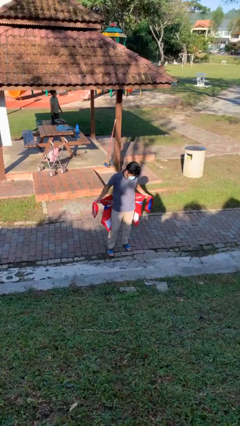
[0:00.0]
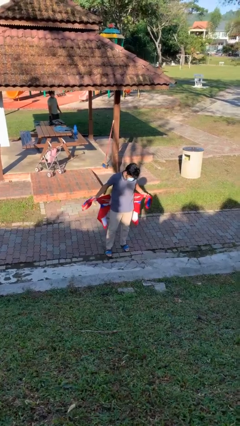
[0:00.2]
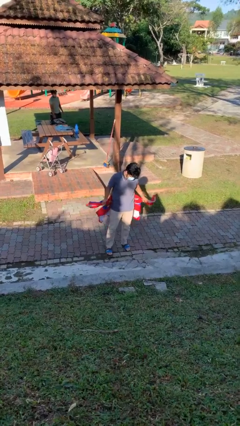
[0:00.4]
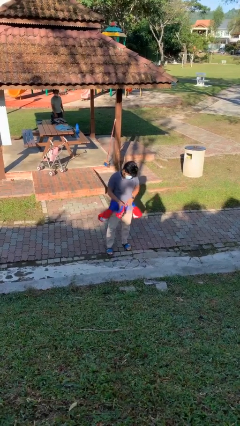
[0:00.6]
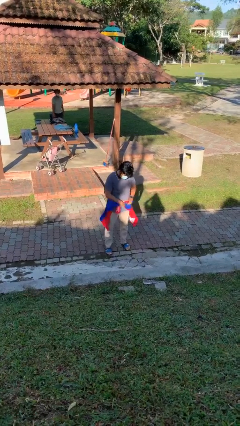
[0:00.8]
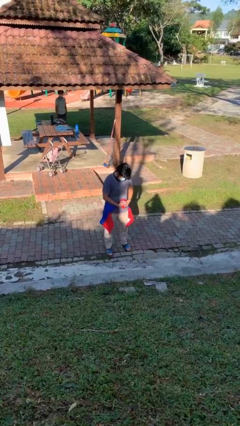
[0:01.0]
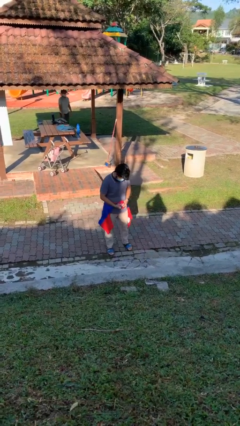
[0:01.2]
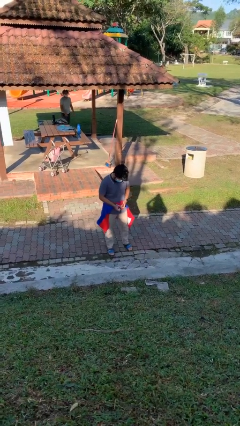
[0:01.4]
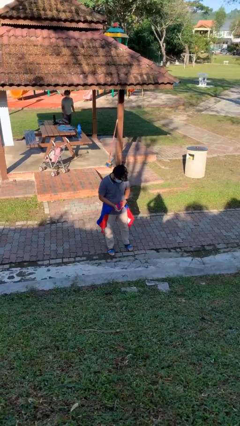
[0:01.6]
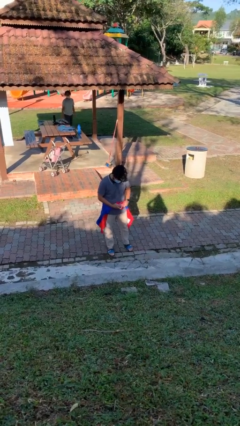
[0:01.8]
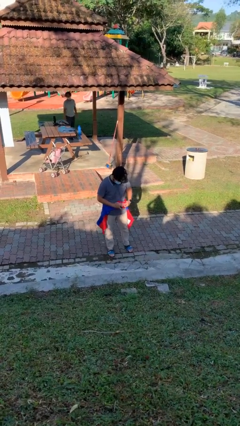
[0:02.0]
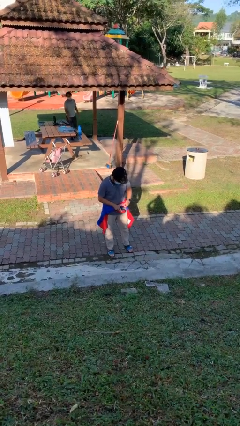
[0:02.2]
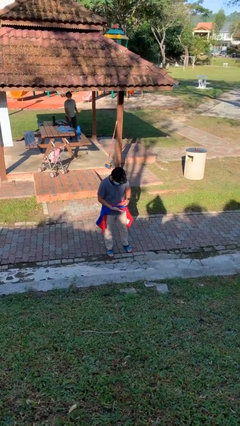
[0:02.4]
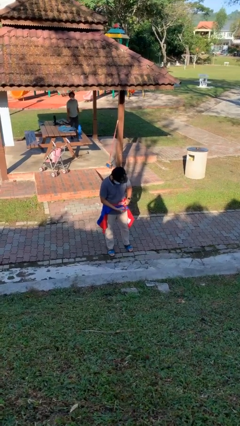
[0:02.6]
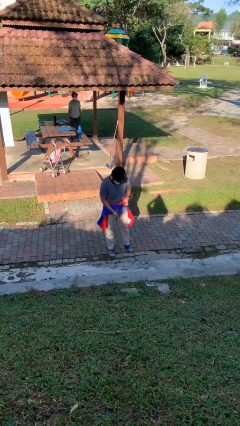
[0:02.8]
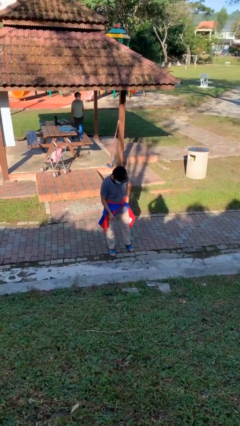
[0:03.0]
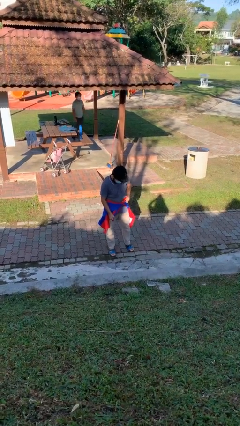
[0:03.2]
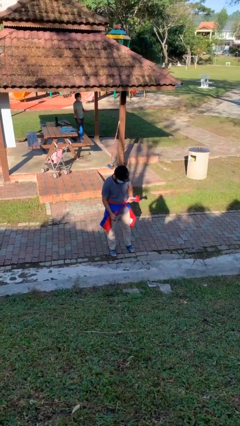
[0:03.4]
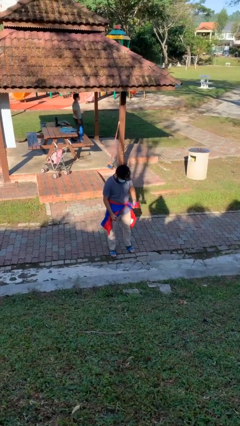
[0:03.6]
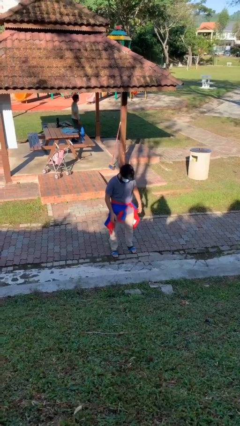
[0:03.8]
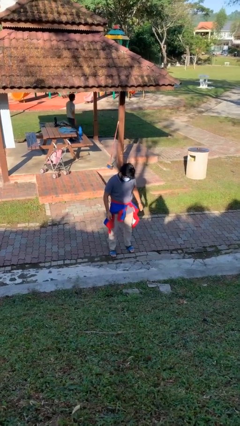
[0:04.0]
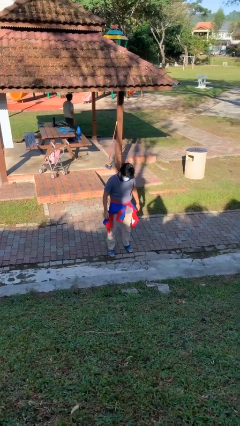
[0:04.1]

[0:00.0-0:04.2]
person ties jacket around waist

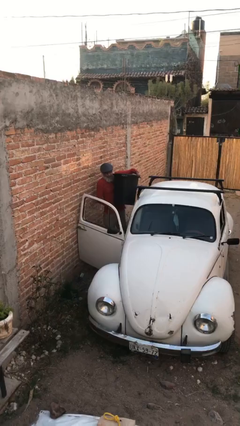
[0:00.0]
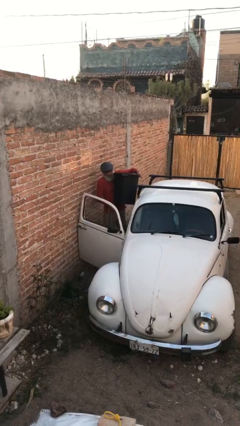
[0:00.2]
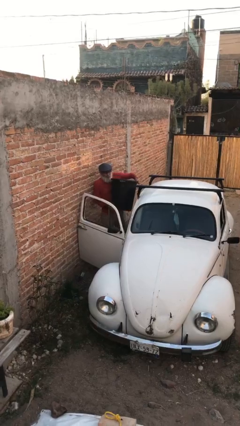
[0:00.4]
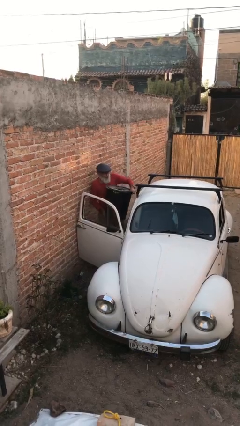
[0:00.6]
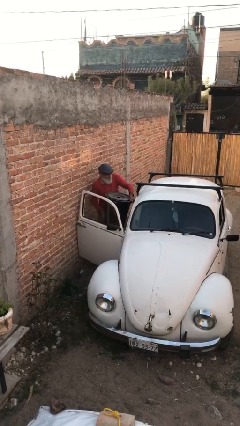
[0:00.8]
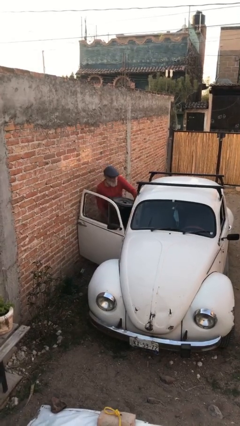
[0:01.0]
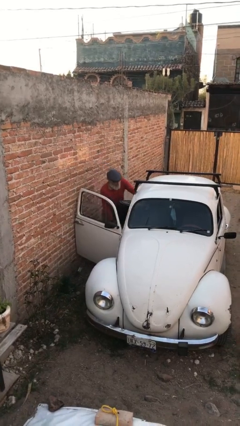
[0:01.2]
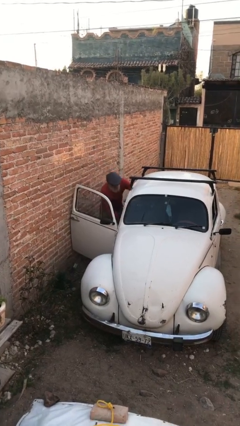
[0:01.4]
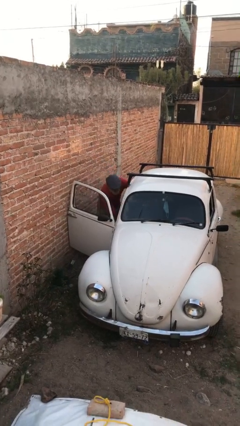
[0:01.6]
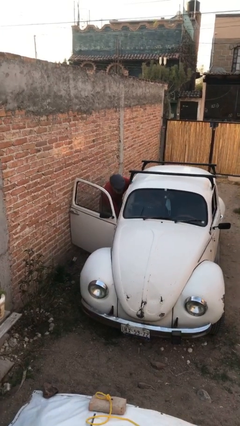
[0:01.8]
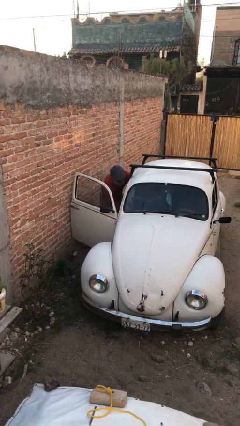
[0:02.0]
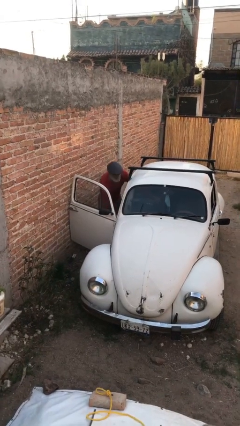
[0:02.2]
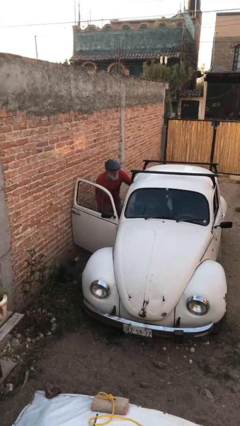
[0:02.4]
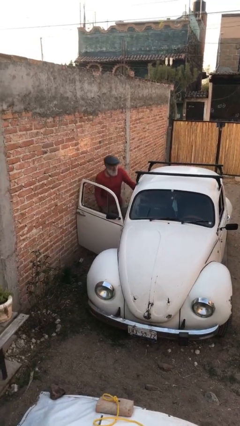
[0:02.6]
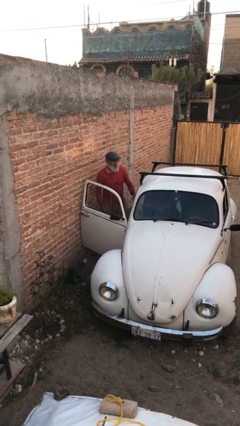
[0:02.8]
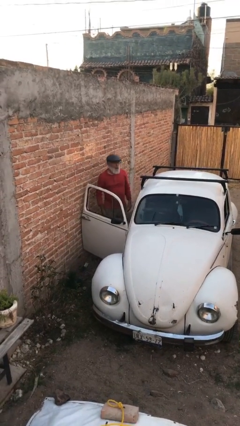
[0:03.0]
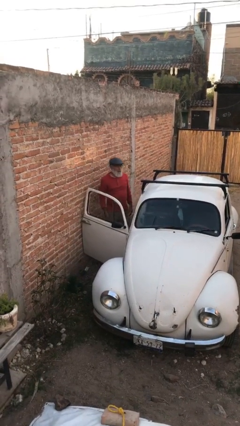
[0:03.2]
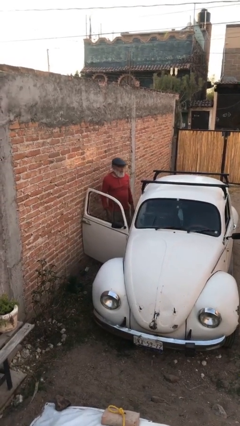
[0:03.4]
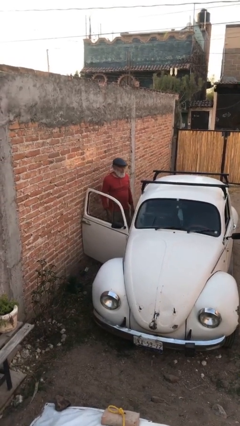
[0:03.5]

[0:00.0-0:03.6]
person loads car

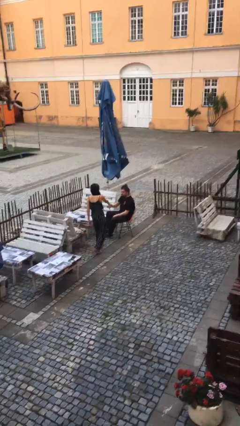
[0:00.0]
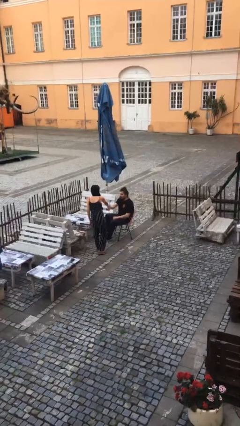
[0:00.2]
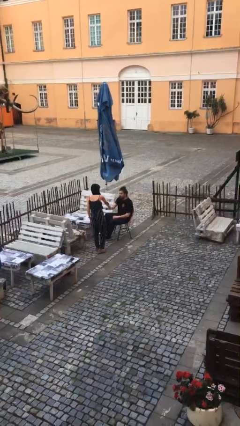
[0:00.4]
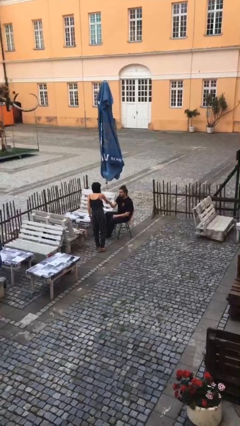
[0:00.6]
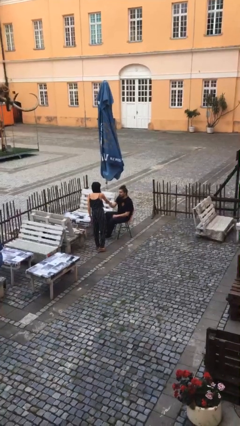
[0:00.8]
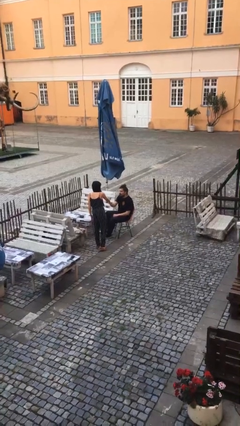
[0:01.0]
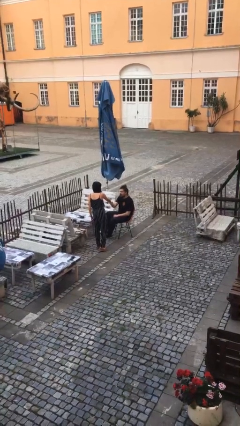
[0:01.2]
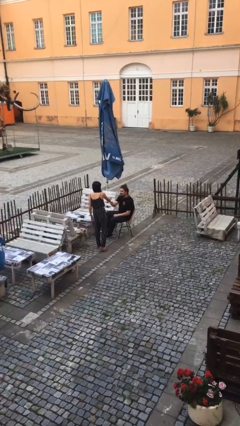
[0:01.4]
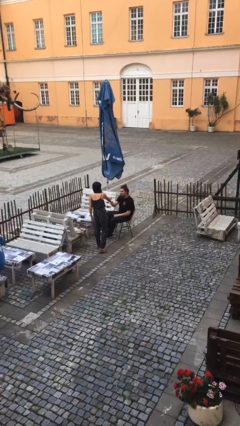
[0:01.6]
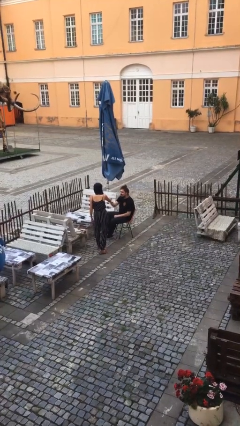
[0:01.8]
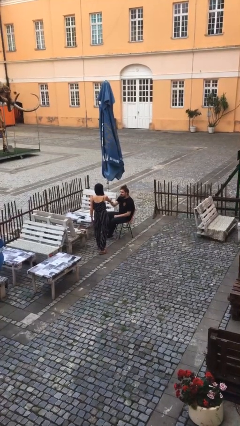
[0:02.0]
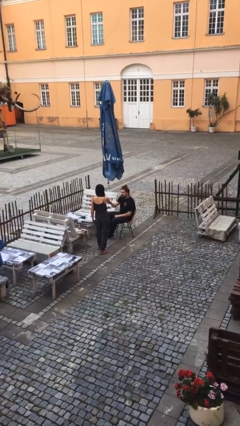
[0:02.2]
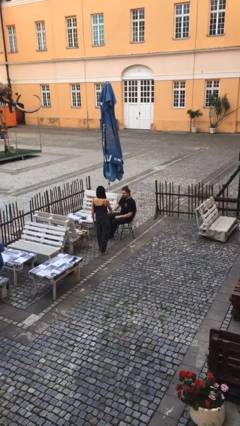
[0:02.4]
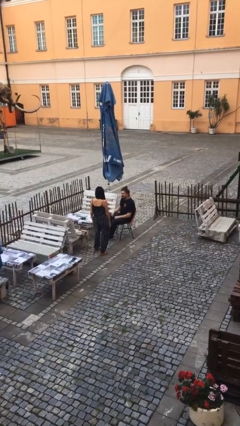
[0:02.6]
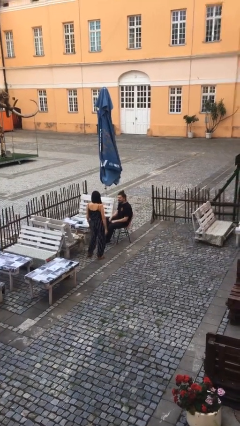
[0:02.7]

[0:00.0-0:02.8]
person shakes hand

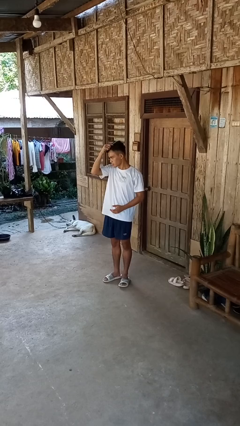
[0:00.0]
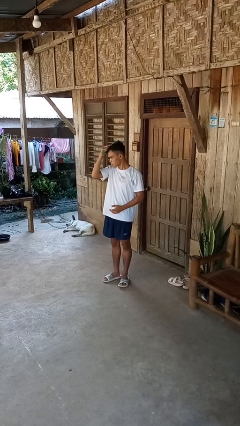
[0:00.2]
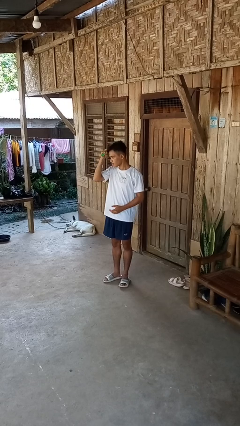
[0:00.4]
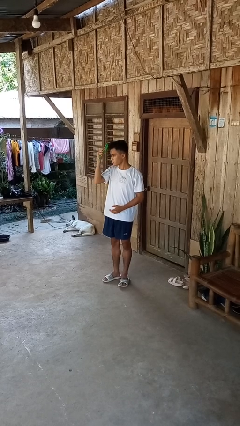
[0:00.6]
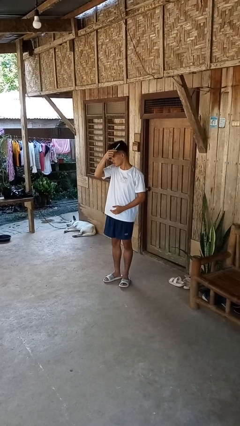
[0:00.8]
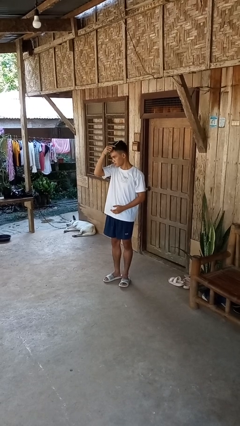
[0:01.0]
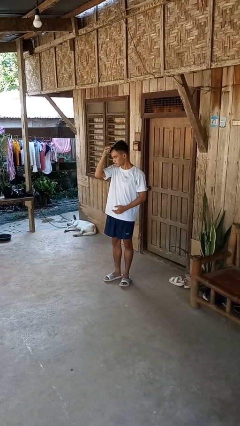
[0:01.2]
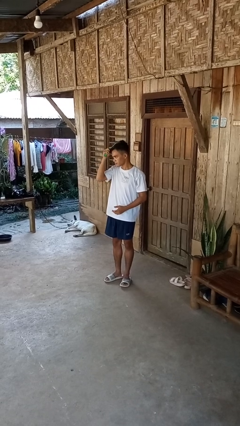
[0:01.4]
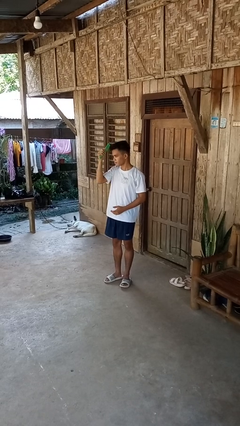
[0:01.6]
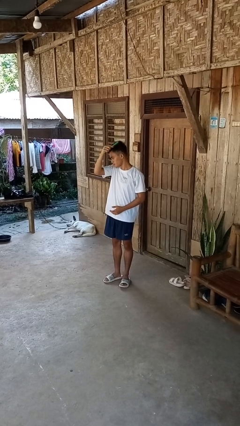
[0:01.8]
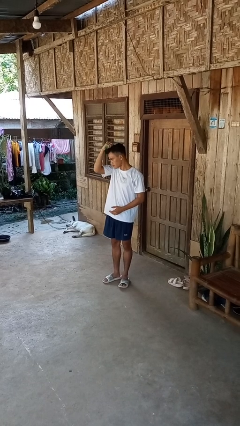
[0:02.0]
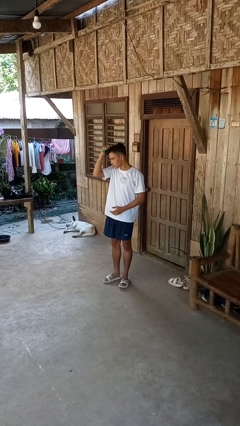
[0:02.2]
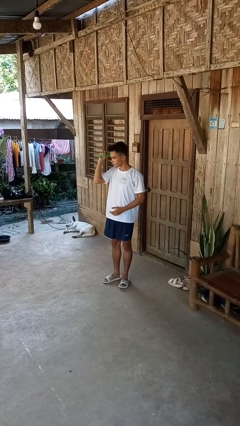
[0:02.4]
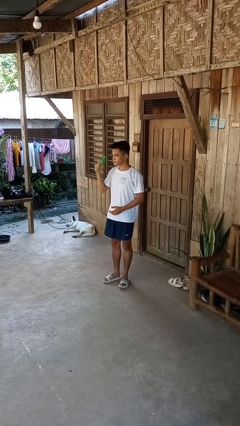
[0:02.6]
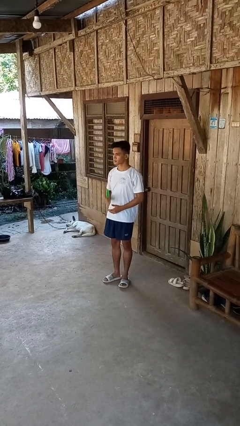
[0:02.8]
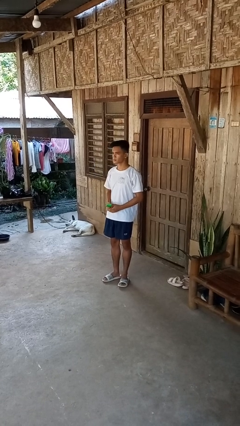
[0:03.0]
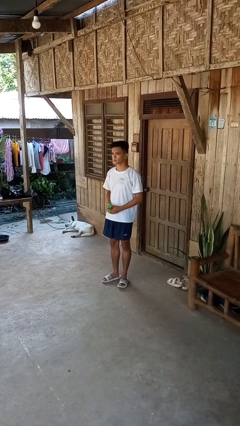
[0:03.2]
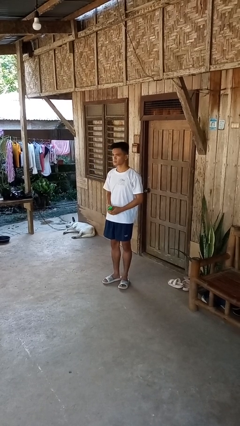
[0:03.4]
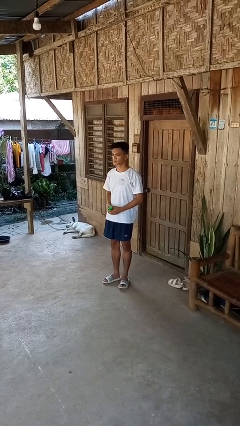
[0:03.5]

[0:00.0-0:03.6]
person brushes hair

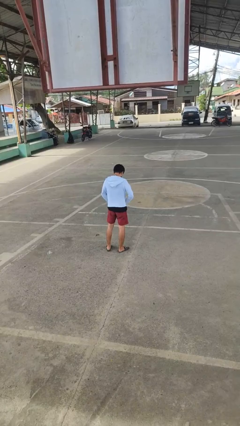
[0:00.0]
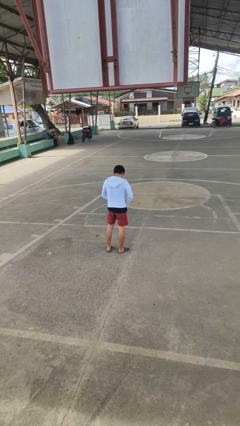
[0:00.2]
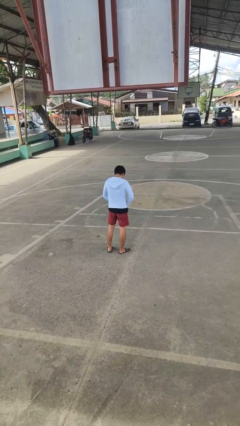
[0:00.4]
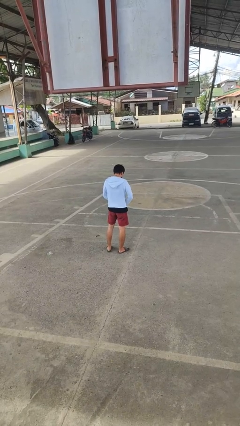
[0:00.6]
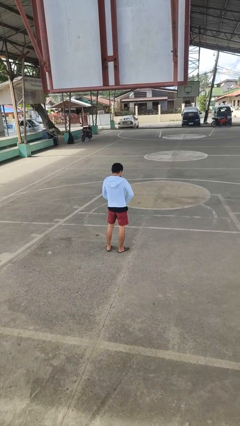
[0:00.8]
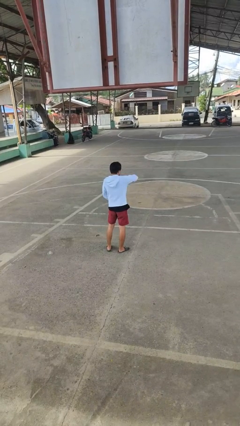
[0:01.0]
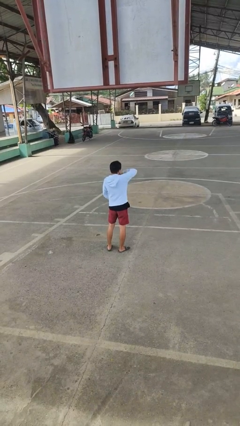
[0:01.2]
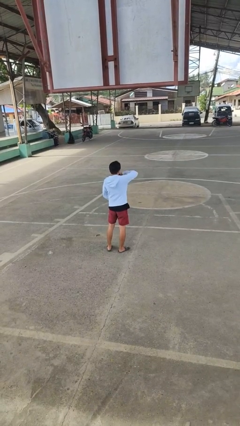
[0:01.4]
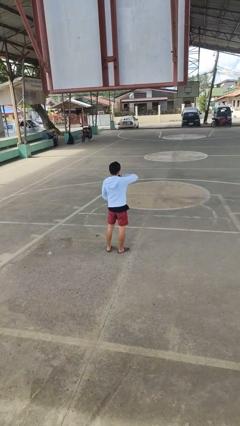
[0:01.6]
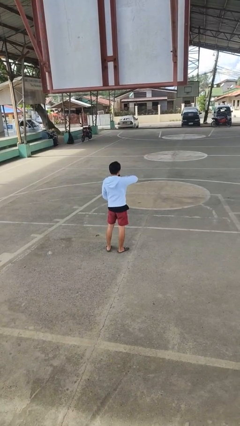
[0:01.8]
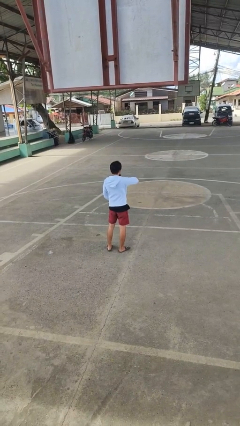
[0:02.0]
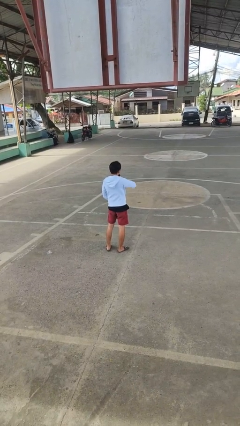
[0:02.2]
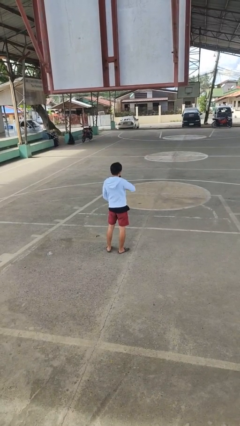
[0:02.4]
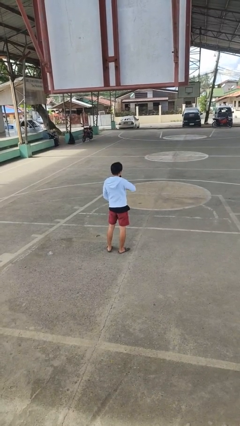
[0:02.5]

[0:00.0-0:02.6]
person zips up jacket

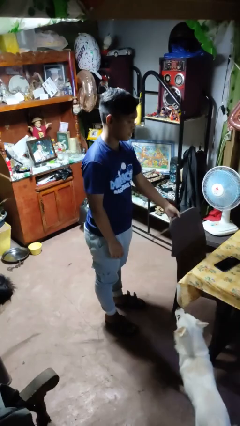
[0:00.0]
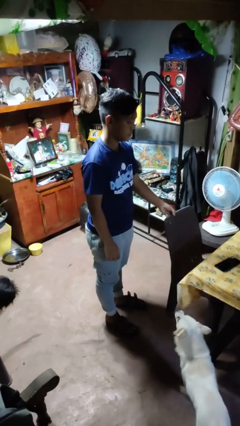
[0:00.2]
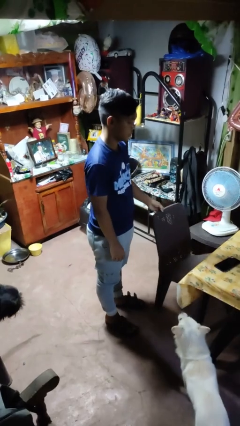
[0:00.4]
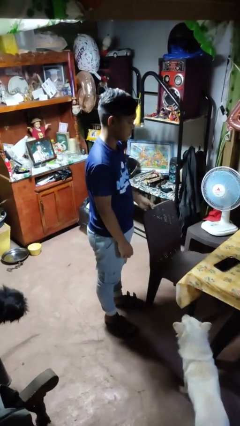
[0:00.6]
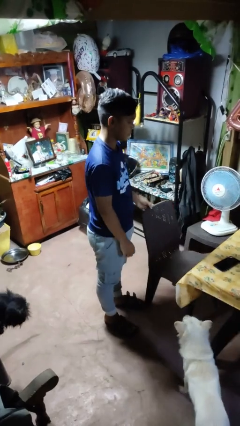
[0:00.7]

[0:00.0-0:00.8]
person pulls out chair
